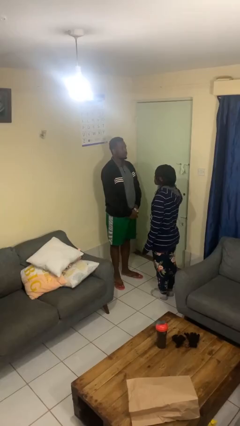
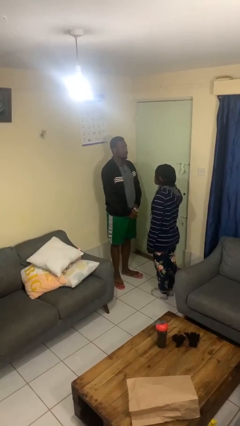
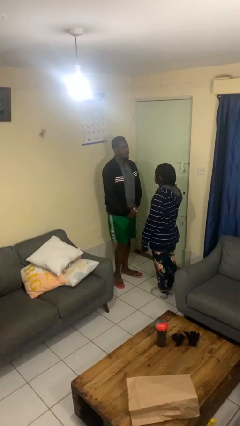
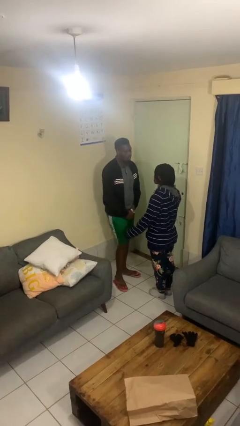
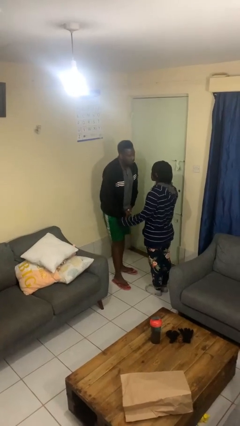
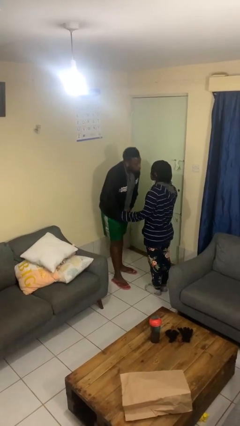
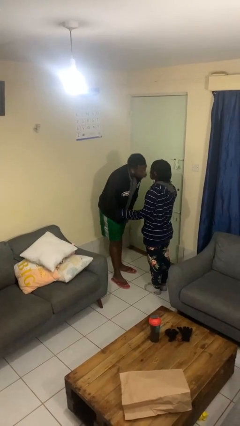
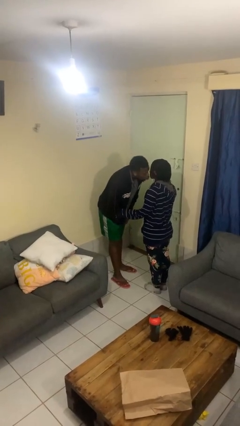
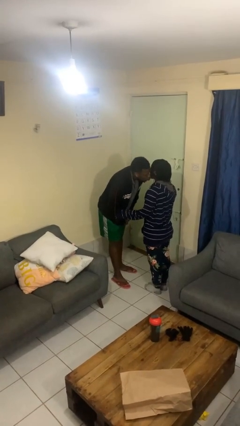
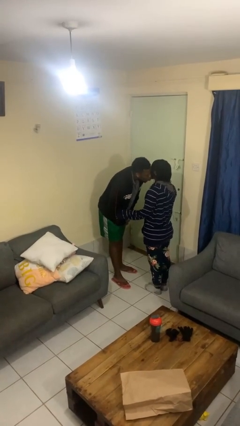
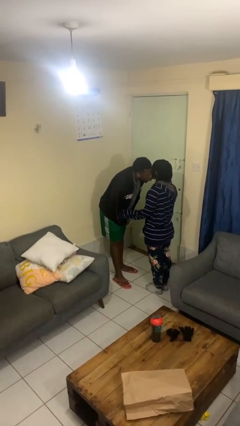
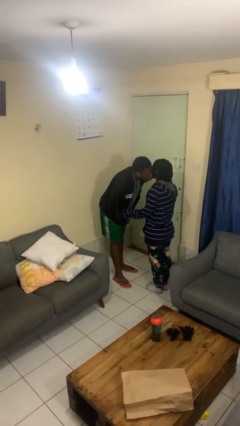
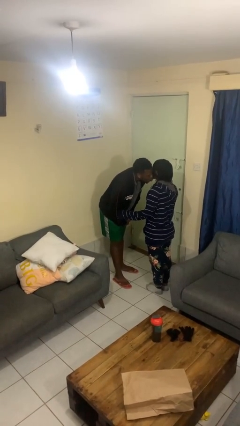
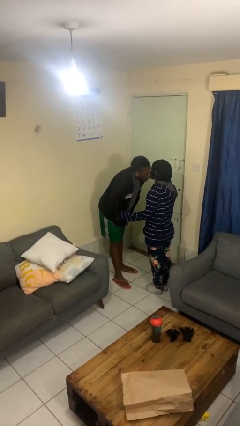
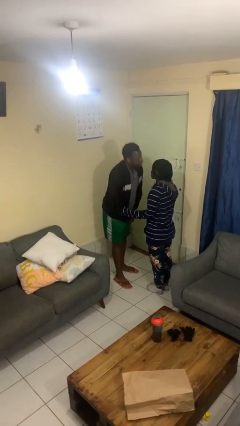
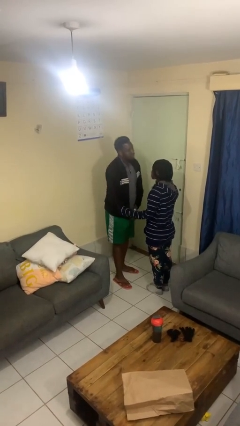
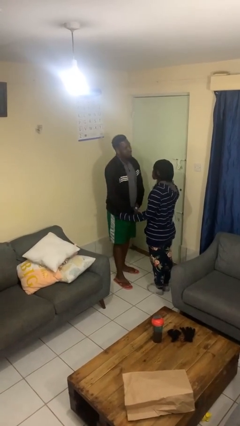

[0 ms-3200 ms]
person kisses cheek of person

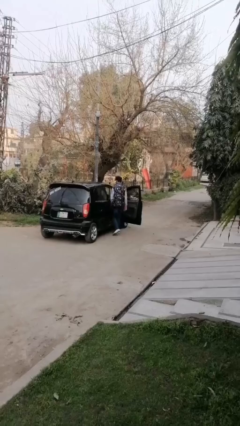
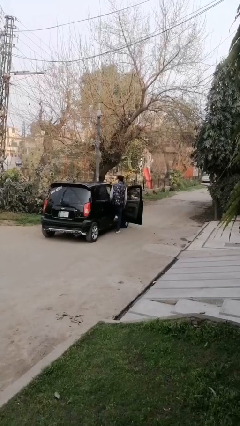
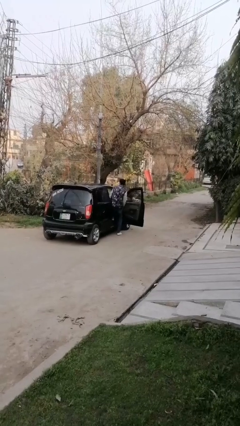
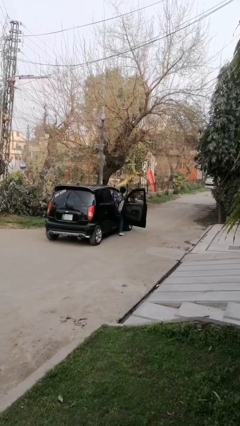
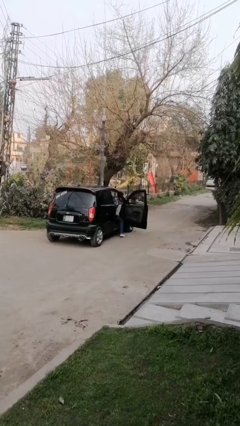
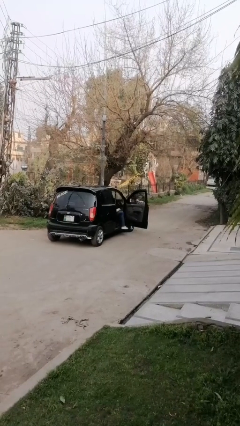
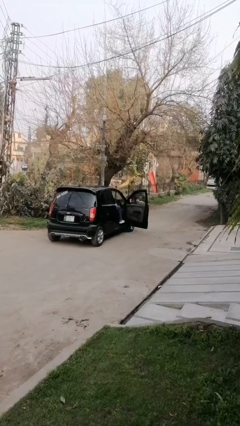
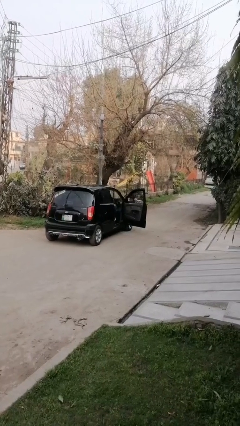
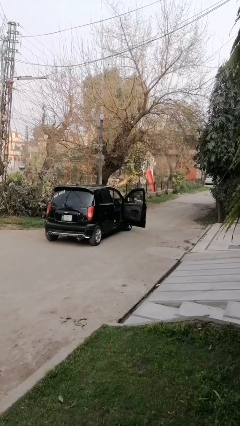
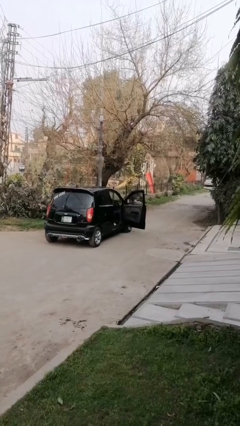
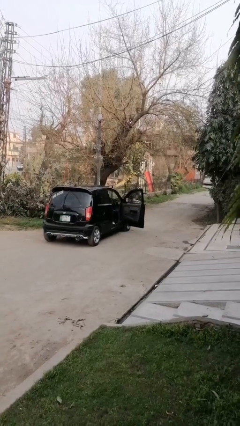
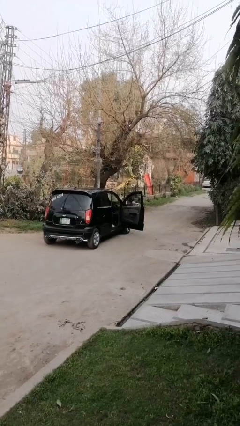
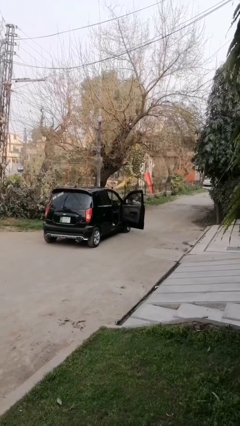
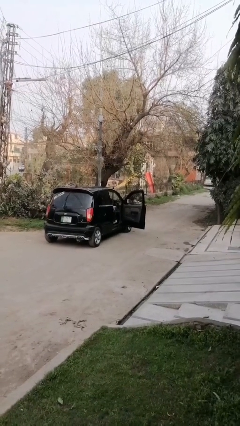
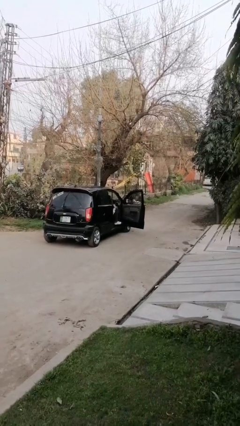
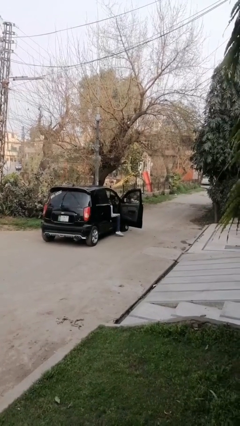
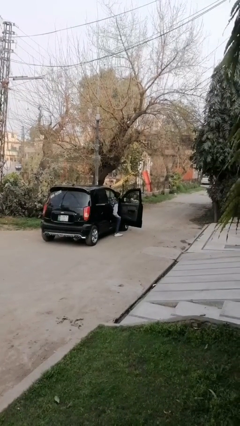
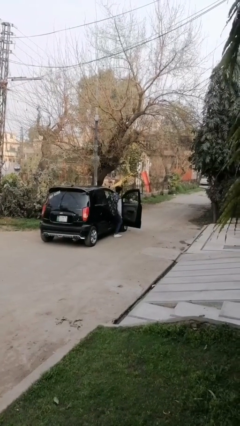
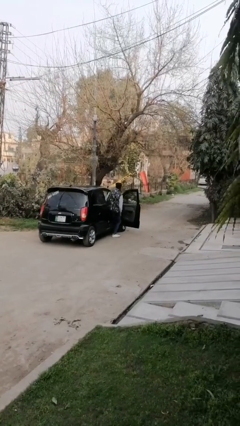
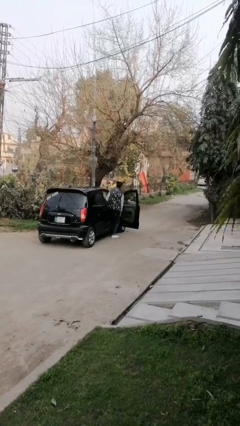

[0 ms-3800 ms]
person enters car

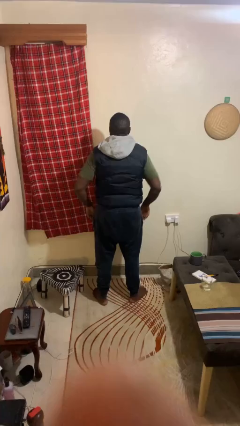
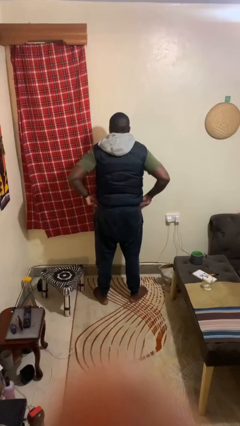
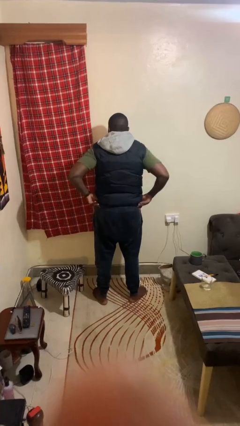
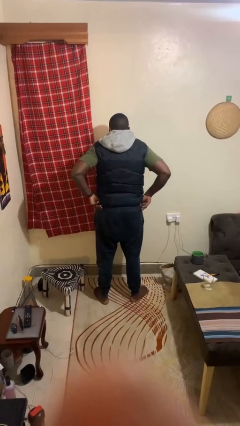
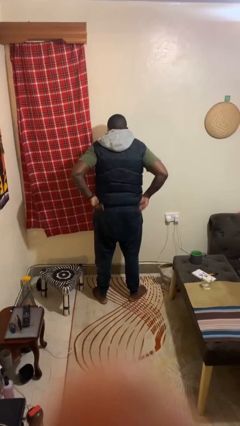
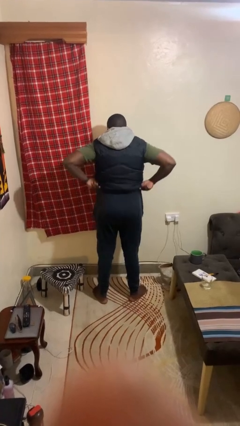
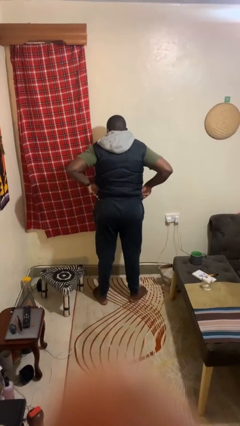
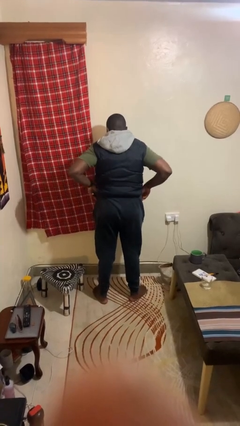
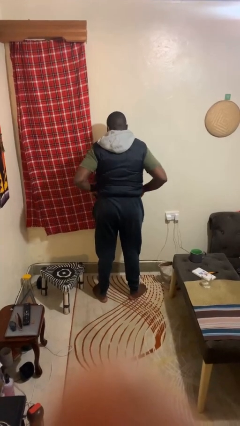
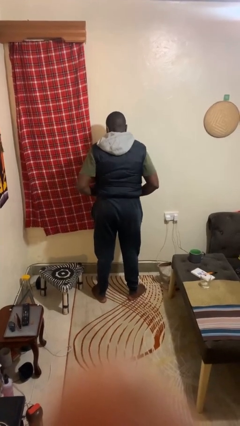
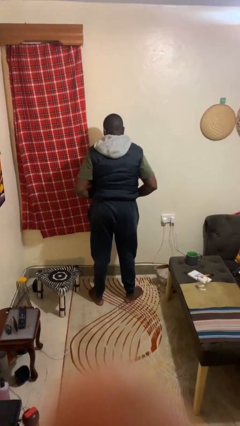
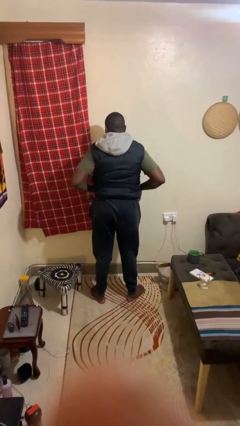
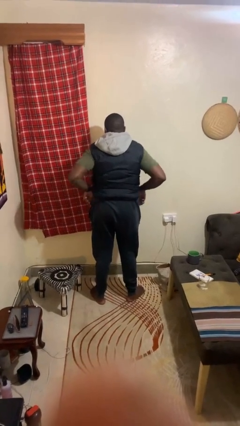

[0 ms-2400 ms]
person hikes up pants

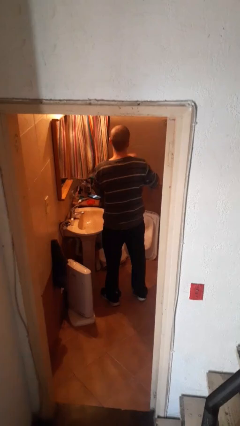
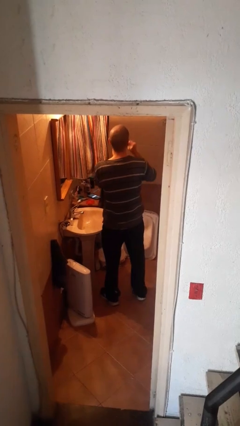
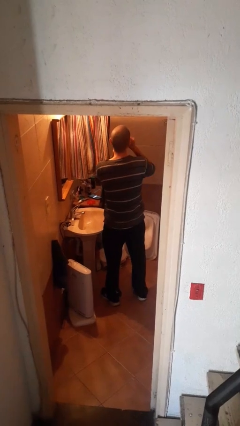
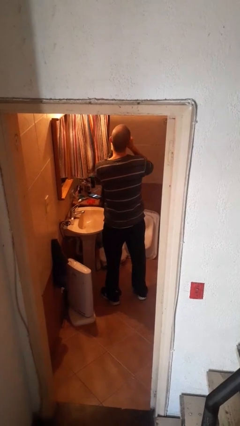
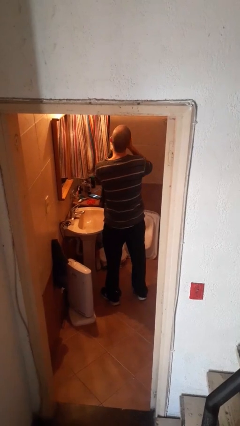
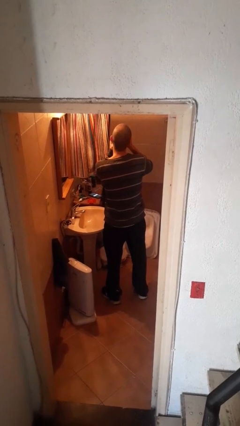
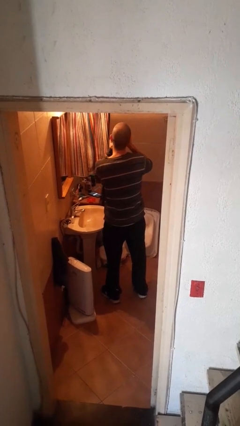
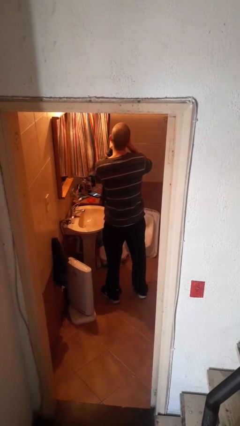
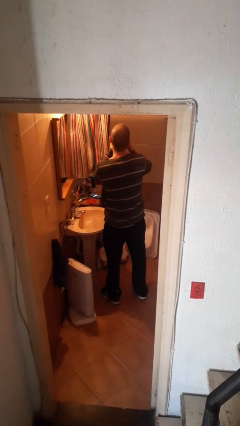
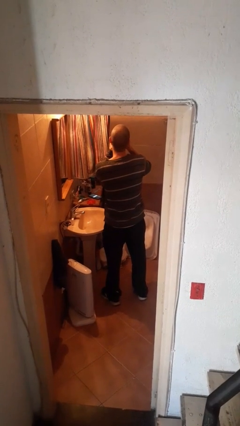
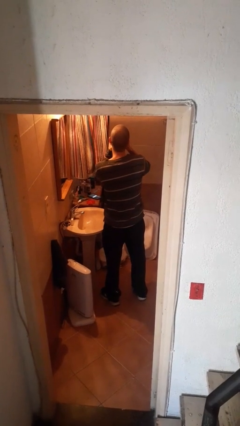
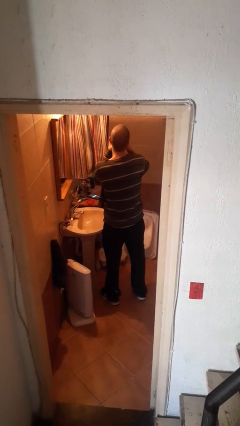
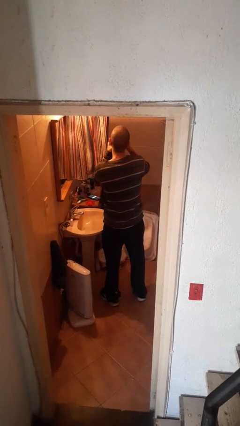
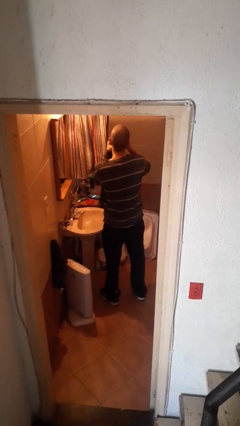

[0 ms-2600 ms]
person flosses

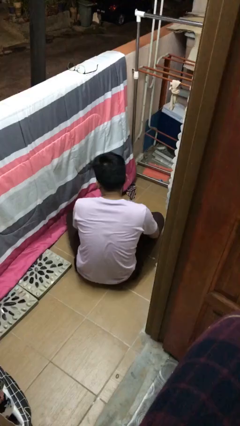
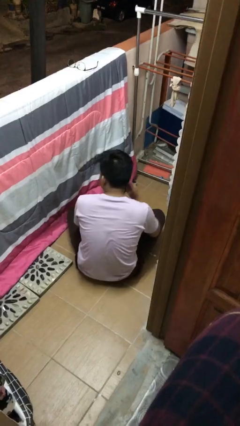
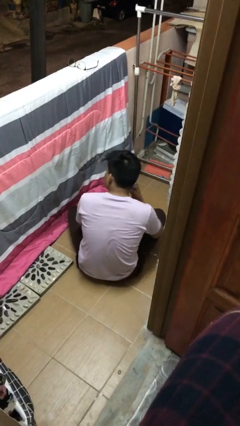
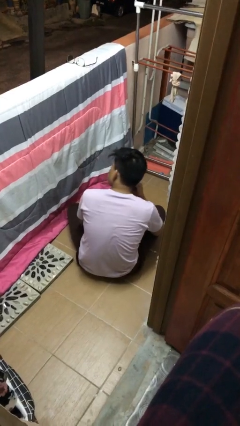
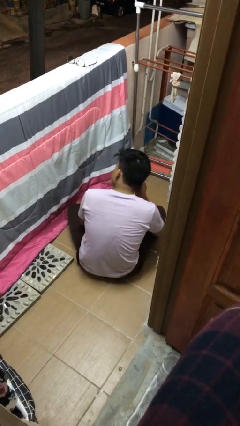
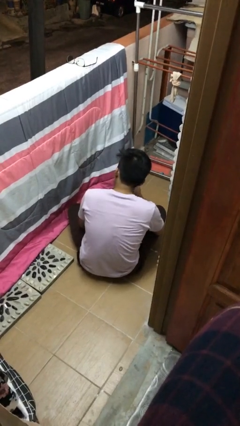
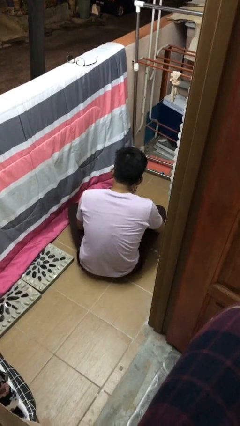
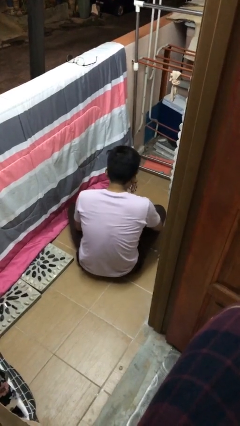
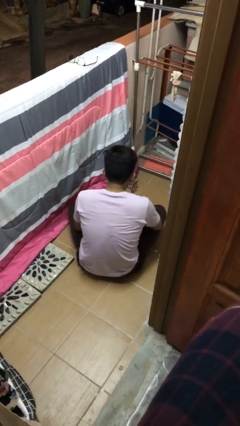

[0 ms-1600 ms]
person takes off earrings

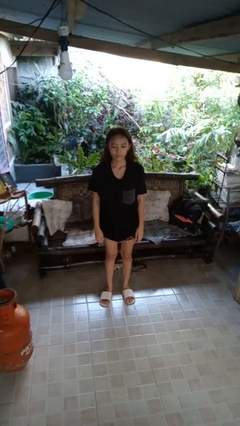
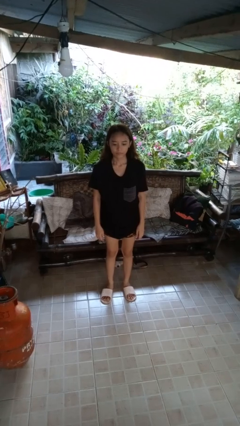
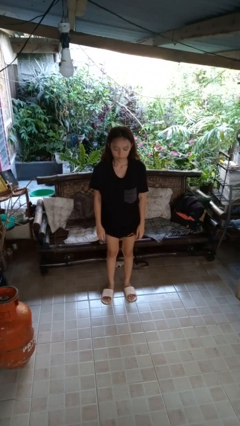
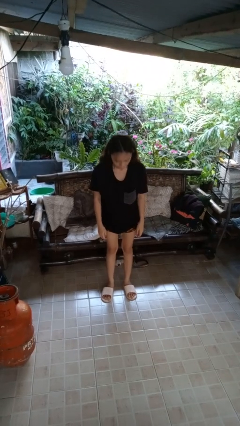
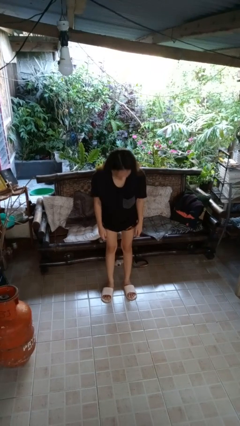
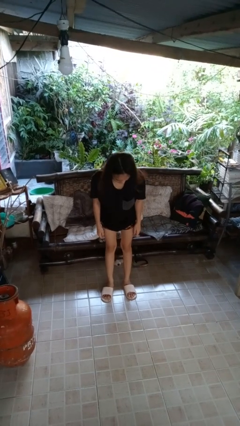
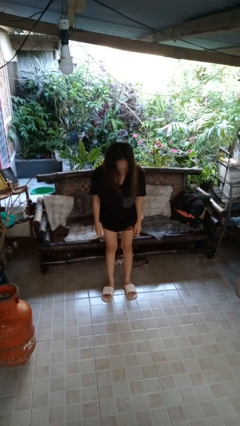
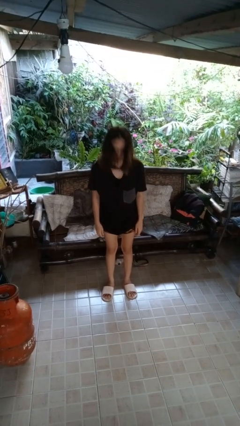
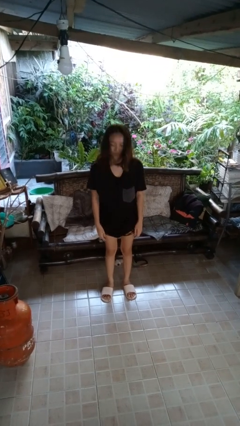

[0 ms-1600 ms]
person bows

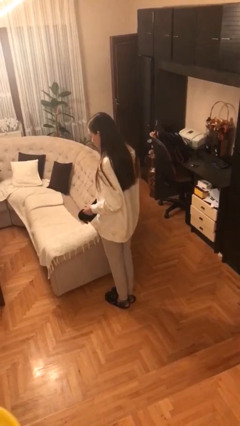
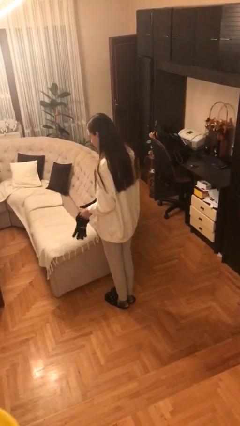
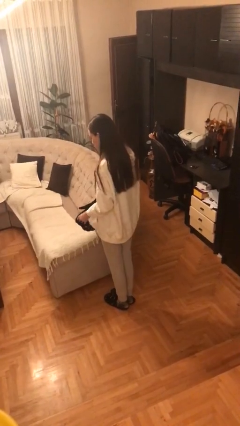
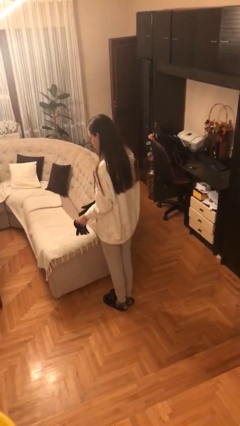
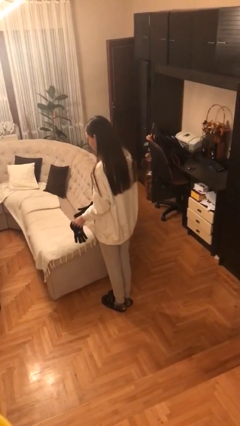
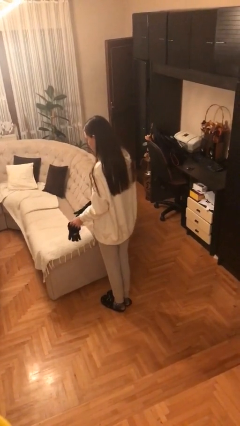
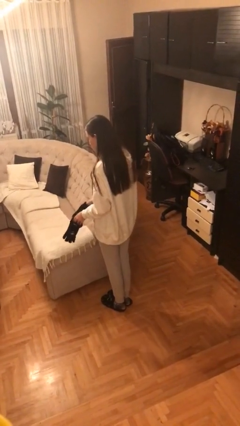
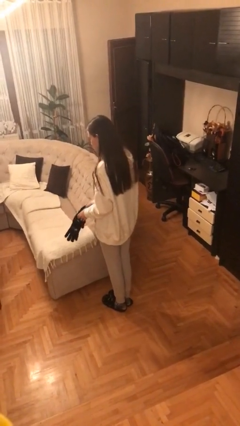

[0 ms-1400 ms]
person takes off gloves

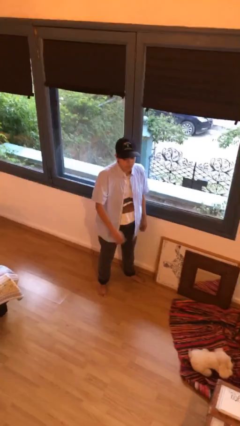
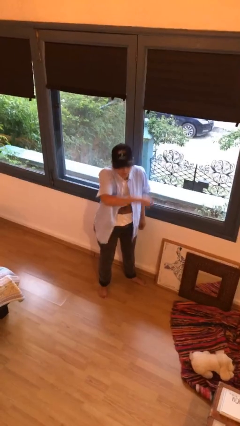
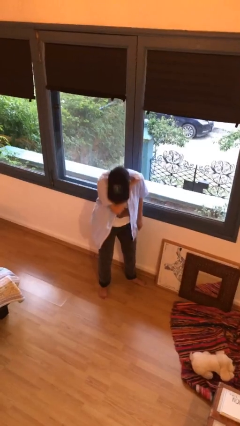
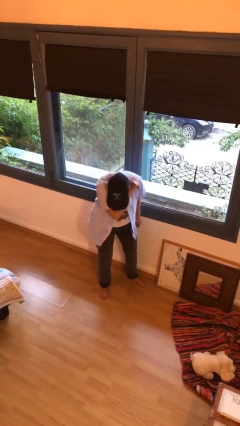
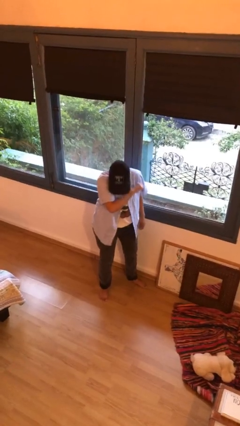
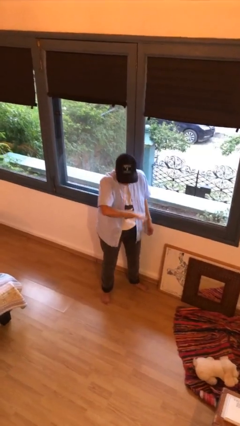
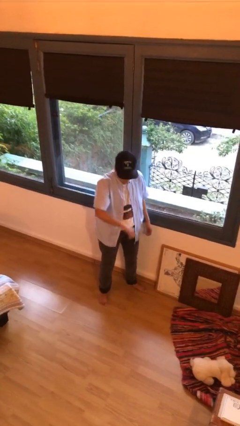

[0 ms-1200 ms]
person sneezes into arm
